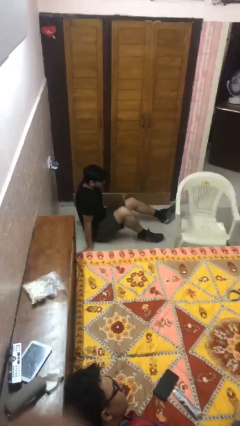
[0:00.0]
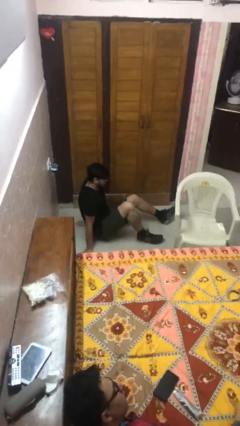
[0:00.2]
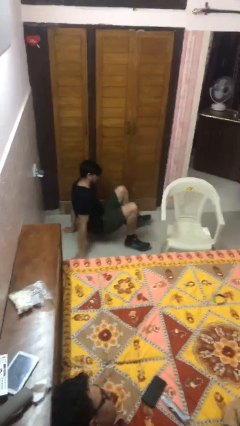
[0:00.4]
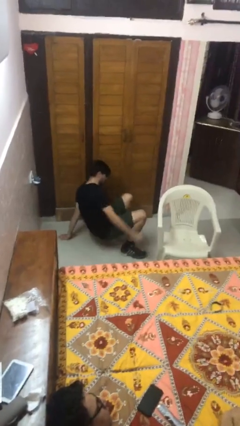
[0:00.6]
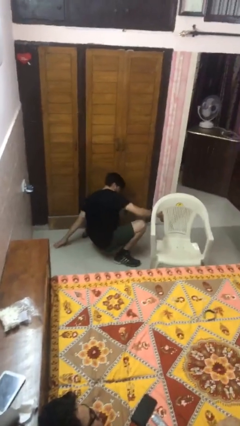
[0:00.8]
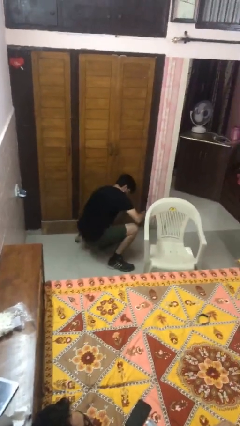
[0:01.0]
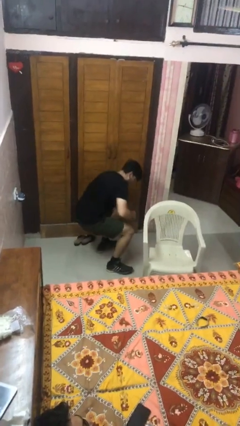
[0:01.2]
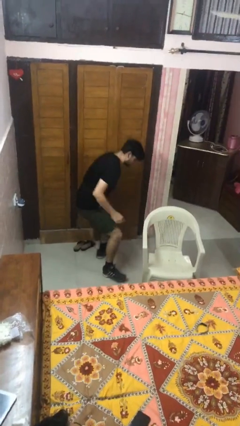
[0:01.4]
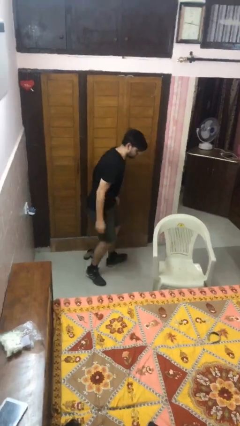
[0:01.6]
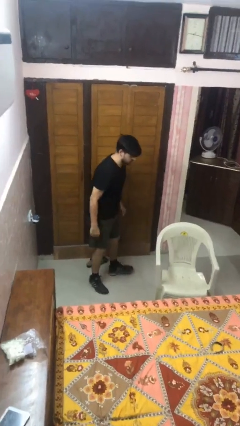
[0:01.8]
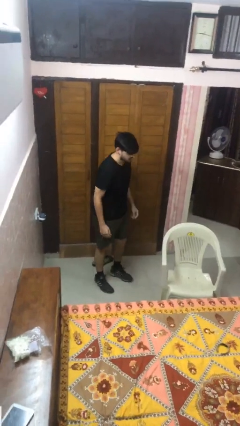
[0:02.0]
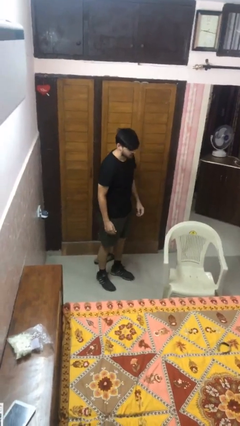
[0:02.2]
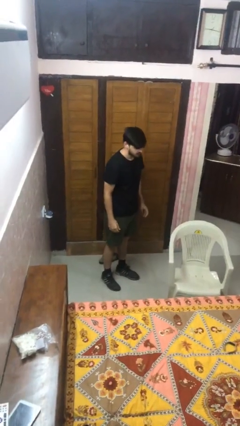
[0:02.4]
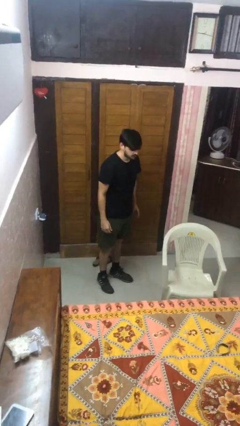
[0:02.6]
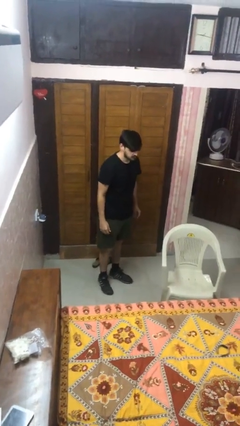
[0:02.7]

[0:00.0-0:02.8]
person stands up from floor

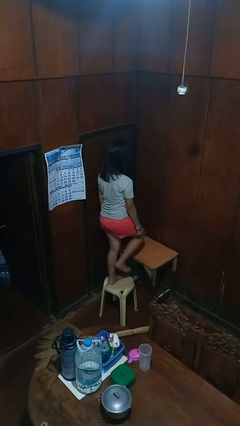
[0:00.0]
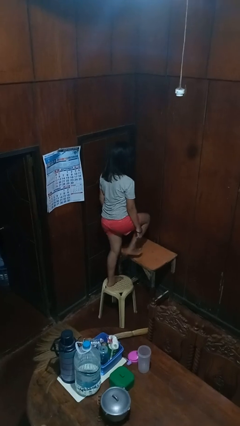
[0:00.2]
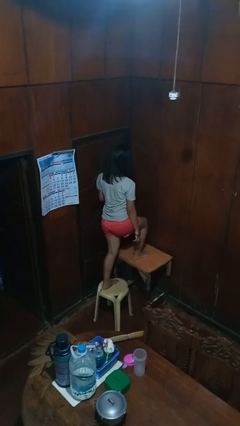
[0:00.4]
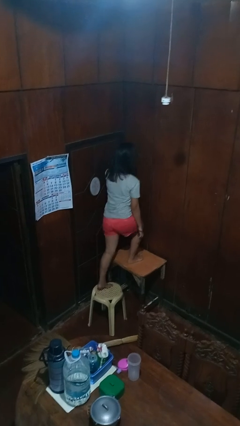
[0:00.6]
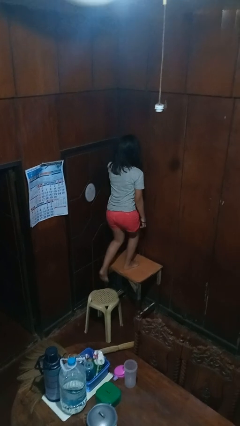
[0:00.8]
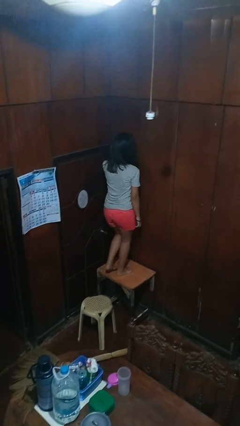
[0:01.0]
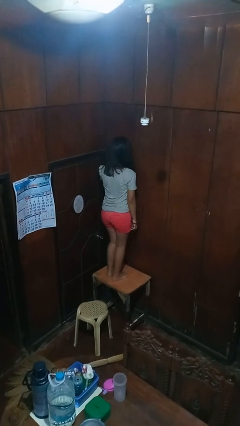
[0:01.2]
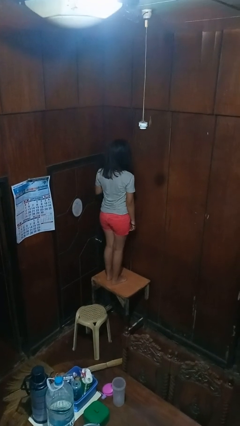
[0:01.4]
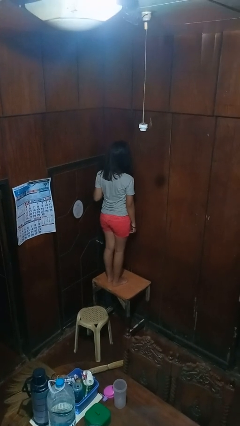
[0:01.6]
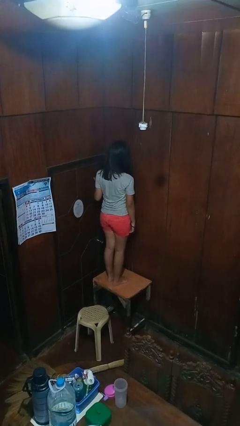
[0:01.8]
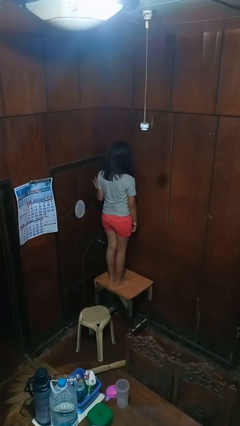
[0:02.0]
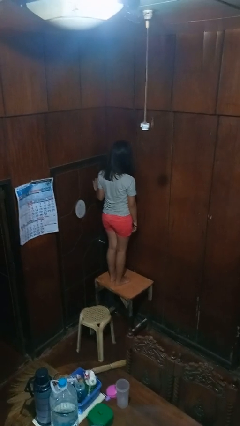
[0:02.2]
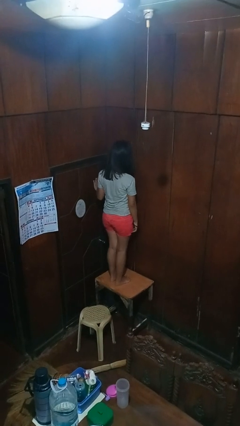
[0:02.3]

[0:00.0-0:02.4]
person climbs on table

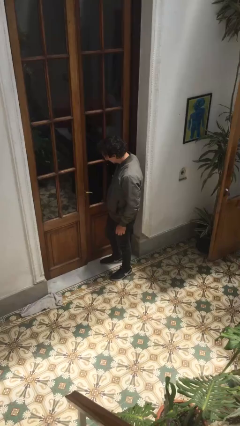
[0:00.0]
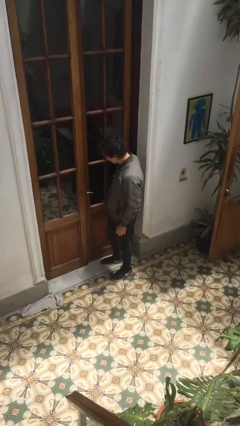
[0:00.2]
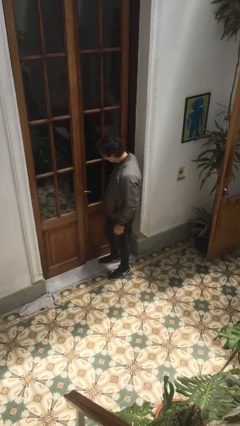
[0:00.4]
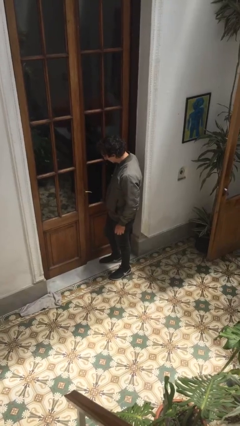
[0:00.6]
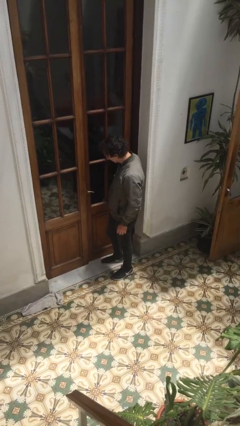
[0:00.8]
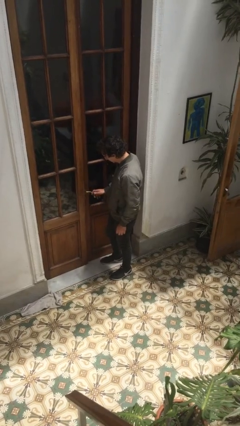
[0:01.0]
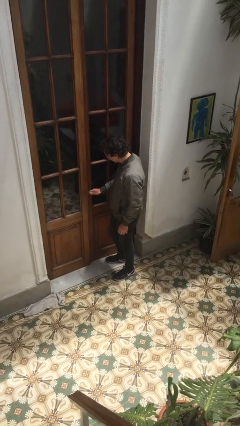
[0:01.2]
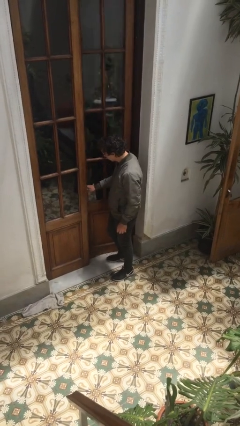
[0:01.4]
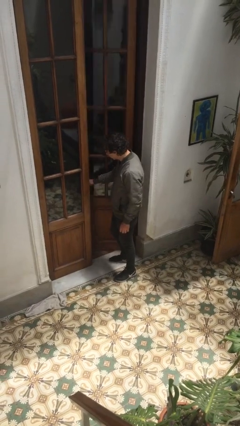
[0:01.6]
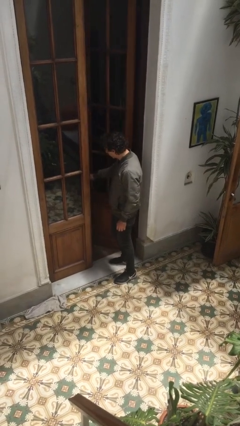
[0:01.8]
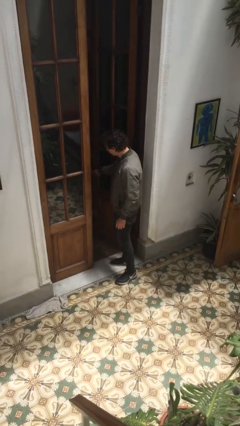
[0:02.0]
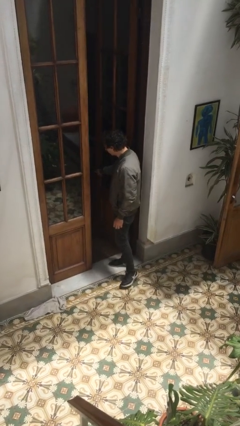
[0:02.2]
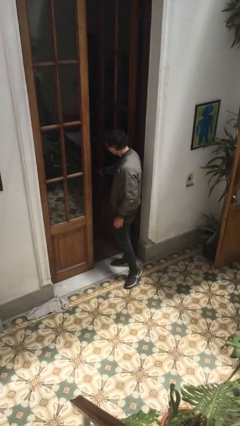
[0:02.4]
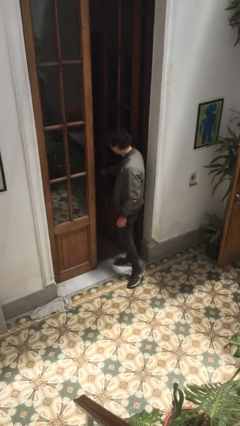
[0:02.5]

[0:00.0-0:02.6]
person opens facility door

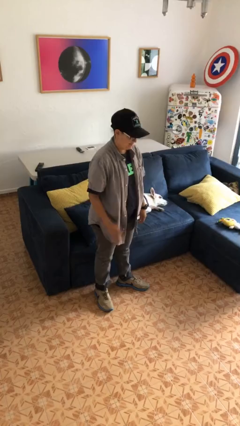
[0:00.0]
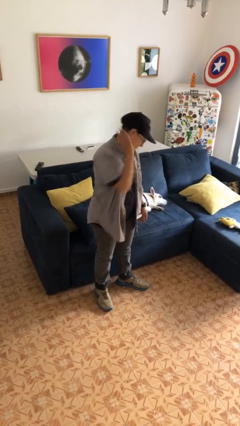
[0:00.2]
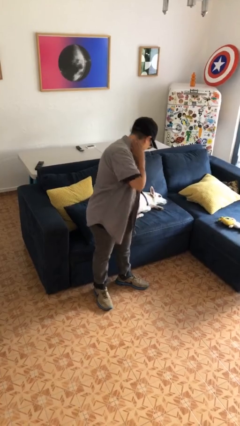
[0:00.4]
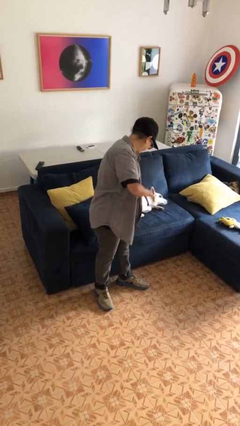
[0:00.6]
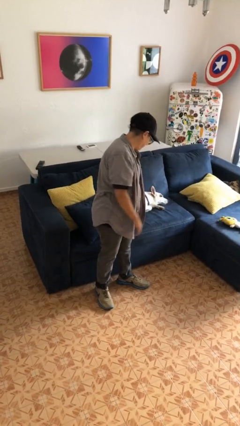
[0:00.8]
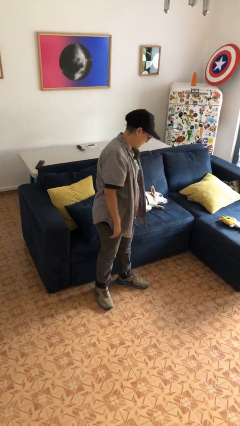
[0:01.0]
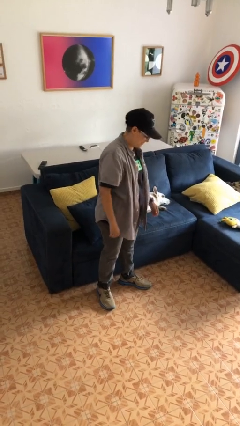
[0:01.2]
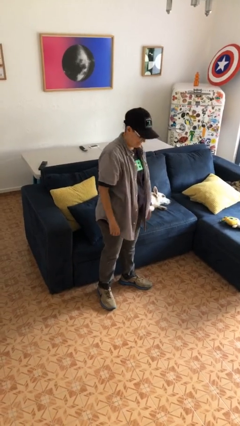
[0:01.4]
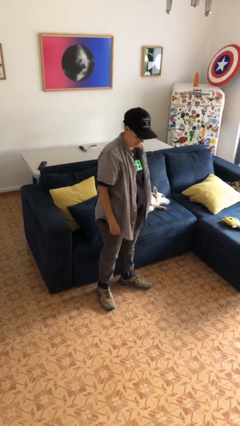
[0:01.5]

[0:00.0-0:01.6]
person swats bug

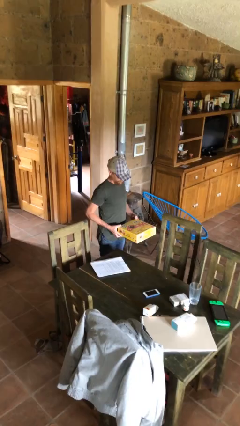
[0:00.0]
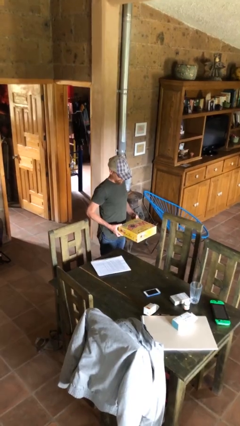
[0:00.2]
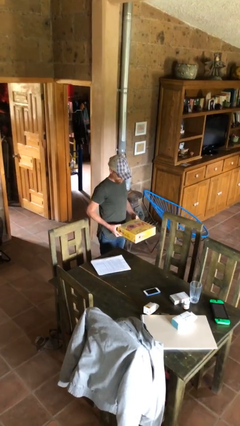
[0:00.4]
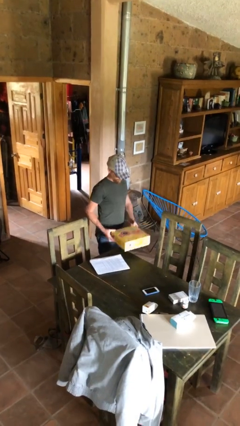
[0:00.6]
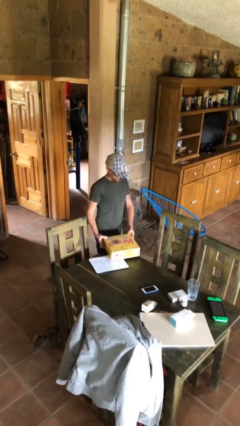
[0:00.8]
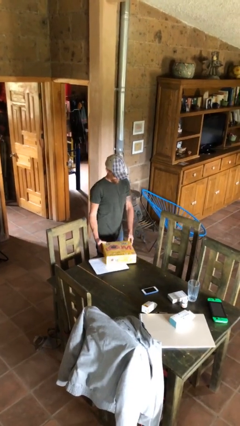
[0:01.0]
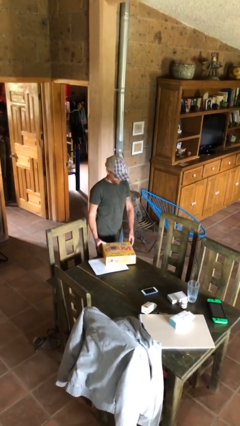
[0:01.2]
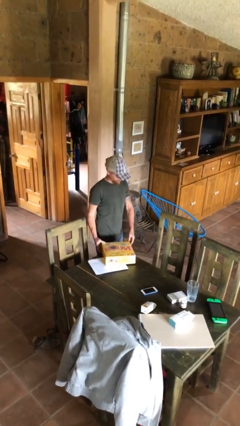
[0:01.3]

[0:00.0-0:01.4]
person puts down object on table

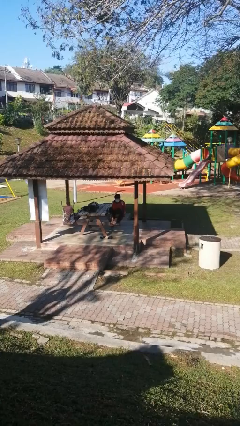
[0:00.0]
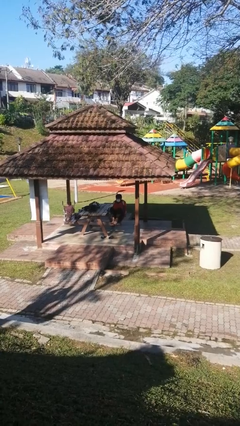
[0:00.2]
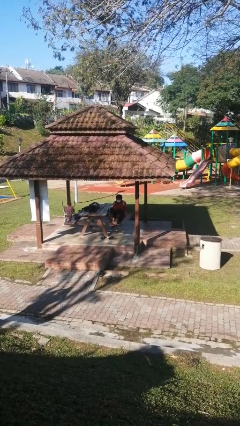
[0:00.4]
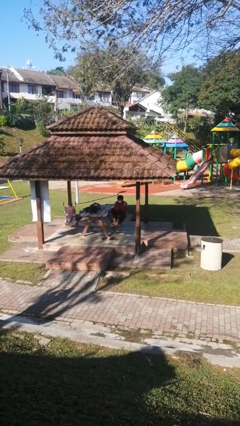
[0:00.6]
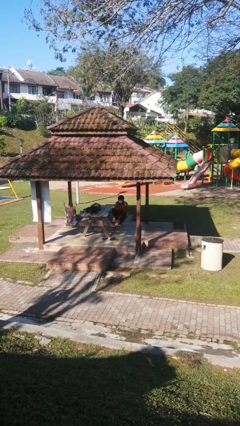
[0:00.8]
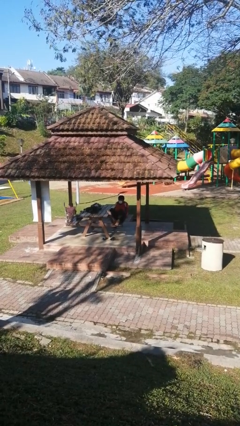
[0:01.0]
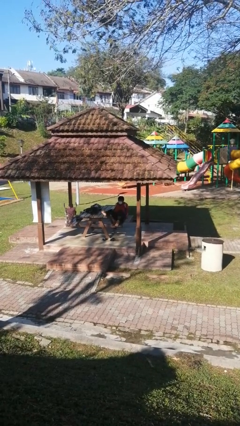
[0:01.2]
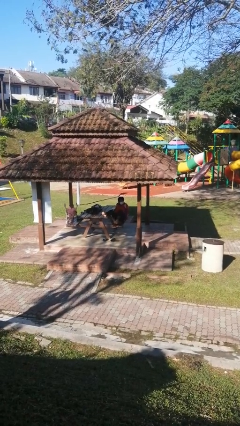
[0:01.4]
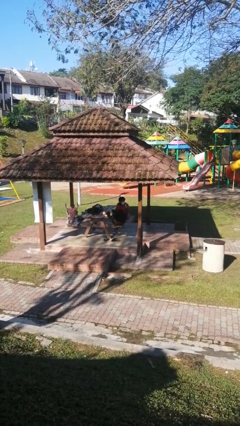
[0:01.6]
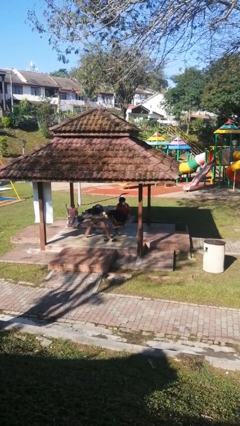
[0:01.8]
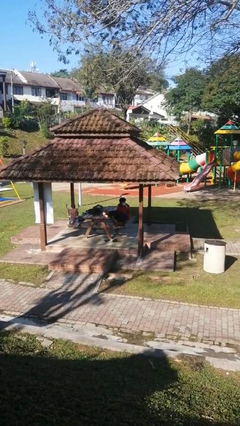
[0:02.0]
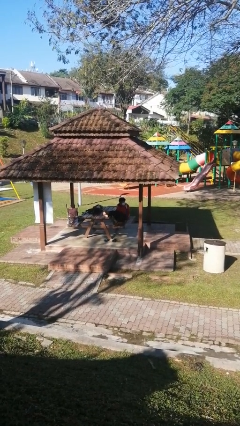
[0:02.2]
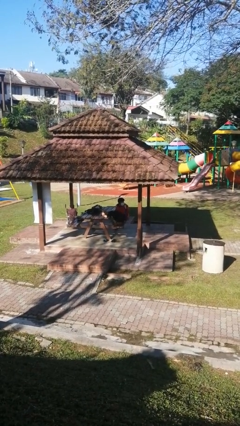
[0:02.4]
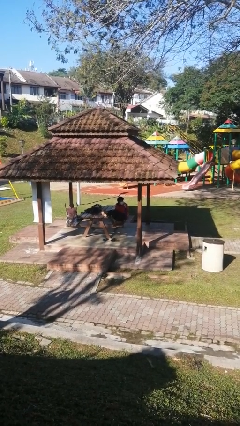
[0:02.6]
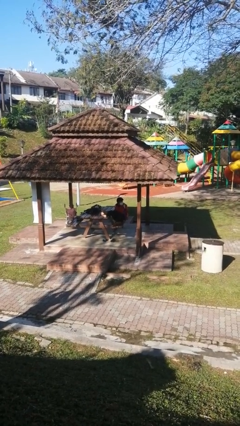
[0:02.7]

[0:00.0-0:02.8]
person puts feet up

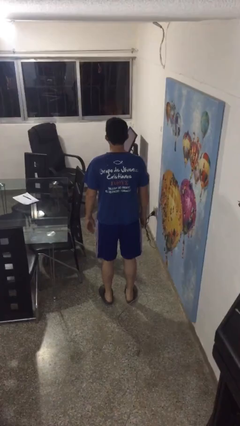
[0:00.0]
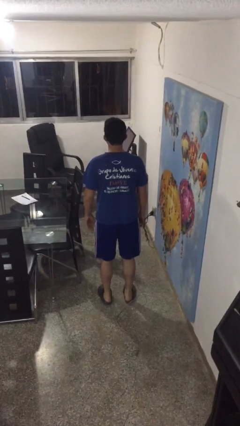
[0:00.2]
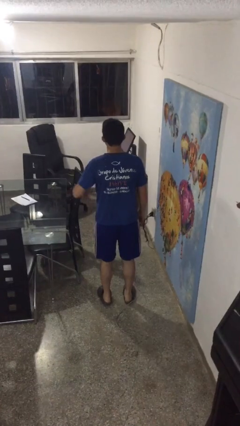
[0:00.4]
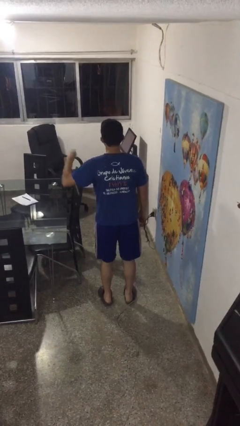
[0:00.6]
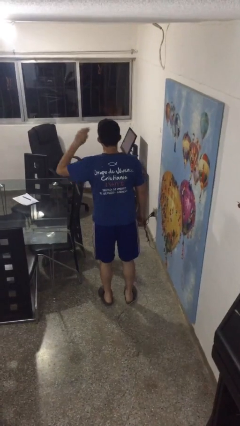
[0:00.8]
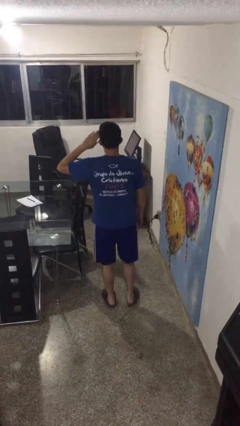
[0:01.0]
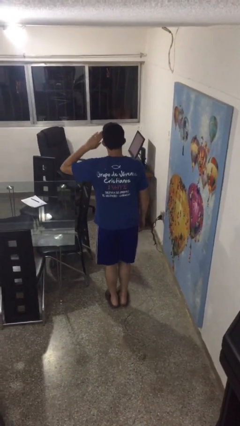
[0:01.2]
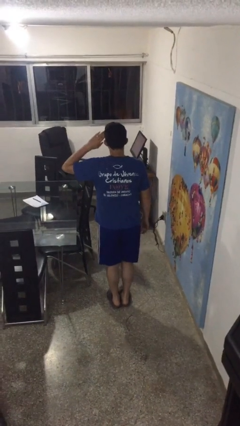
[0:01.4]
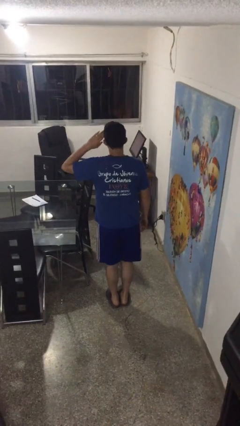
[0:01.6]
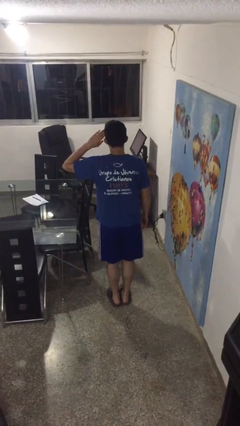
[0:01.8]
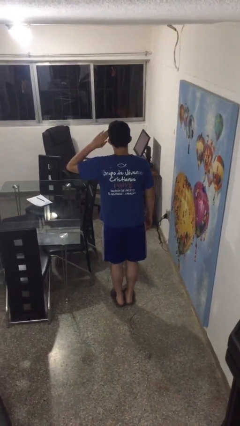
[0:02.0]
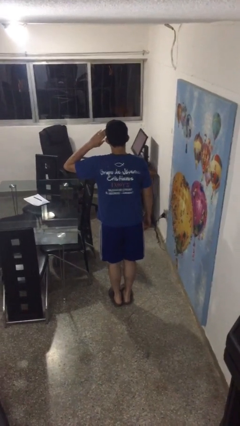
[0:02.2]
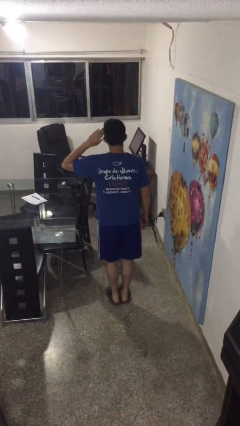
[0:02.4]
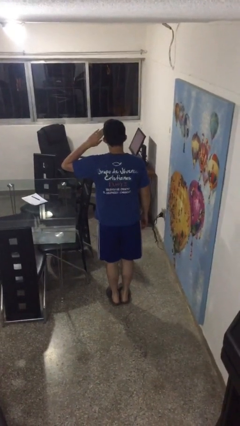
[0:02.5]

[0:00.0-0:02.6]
person salutes

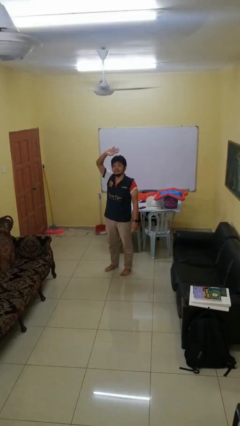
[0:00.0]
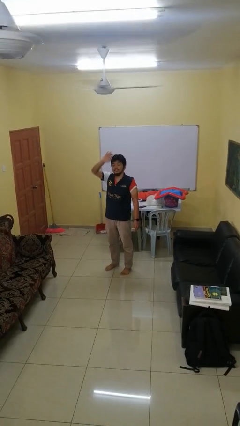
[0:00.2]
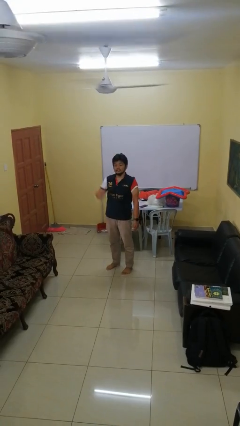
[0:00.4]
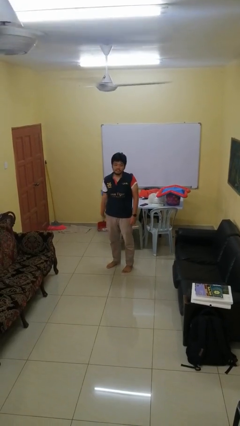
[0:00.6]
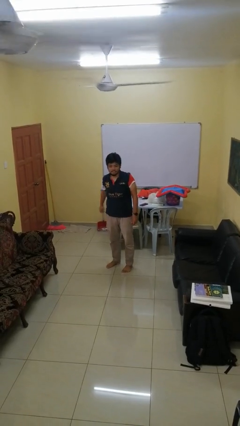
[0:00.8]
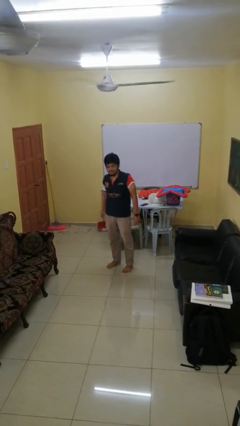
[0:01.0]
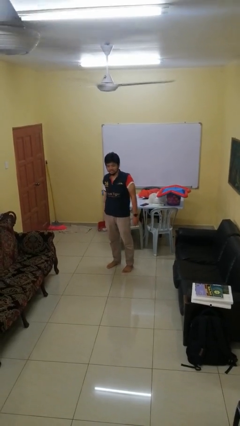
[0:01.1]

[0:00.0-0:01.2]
person gestures lower hand
